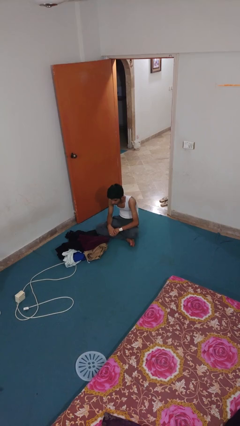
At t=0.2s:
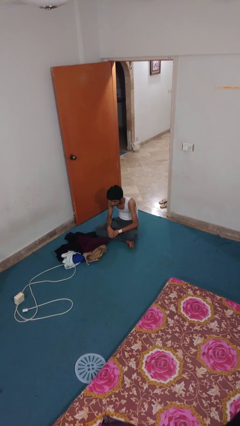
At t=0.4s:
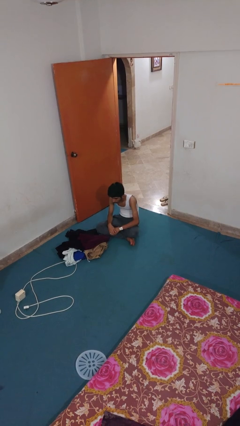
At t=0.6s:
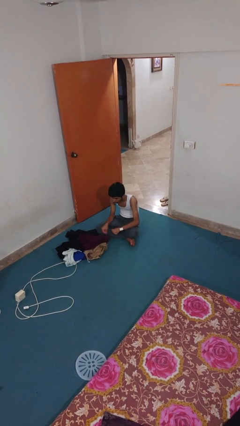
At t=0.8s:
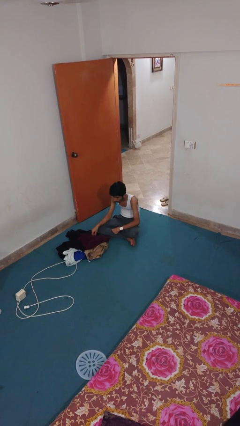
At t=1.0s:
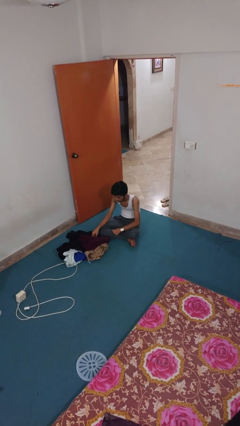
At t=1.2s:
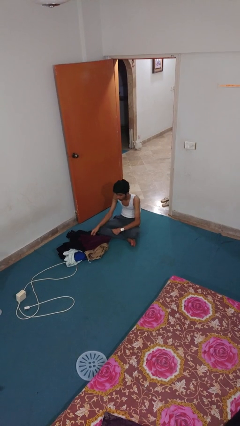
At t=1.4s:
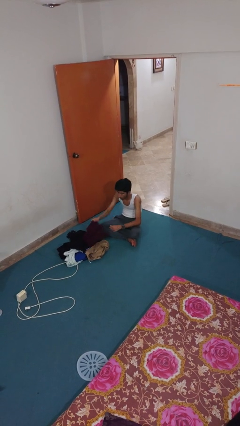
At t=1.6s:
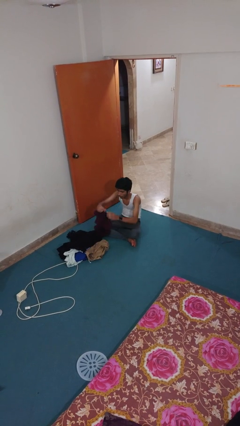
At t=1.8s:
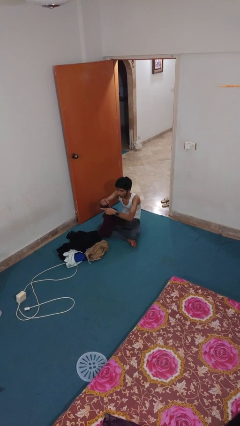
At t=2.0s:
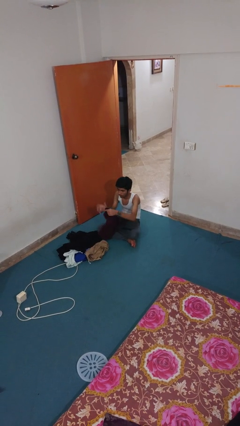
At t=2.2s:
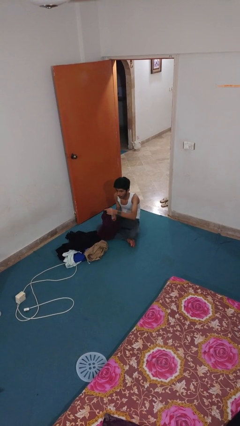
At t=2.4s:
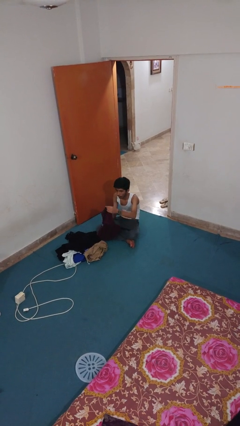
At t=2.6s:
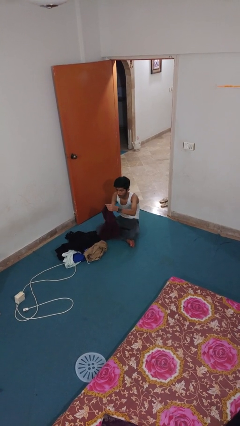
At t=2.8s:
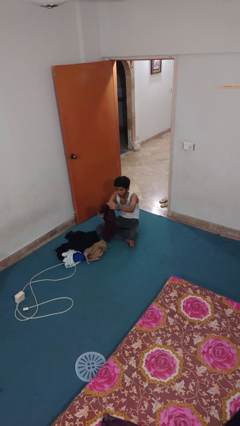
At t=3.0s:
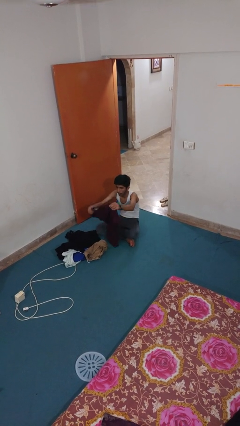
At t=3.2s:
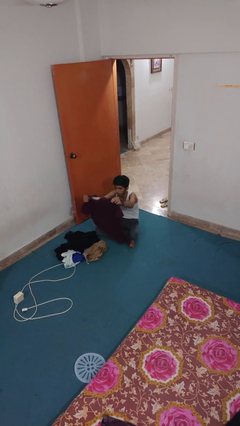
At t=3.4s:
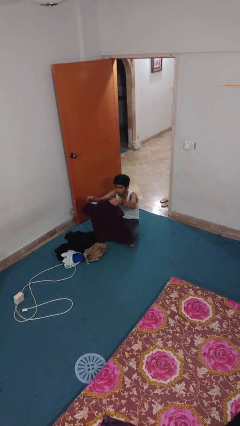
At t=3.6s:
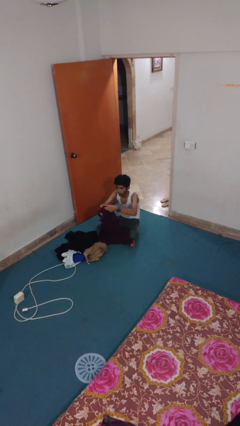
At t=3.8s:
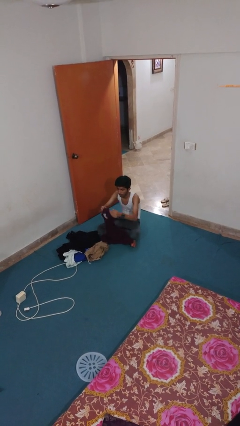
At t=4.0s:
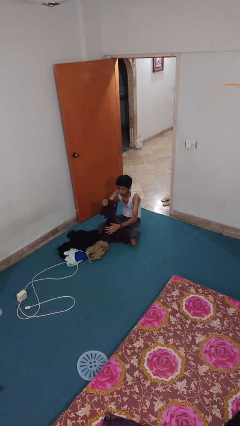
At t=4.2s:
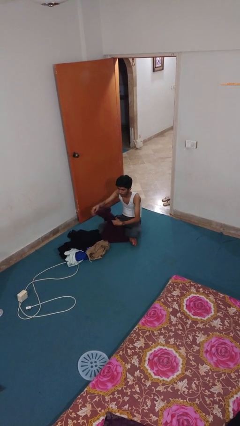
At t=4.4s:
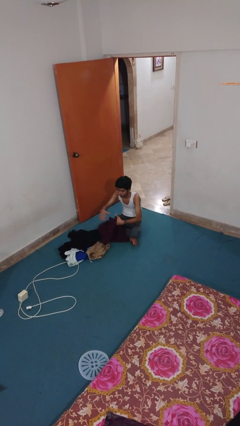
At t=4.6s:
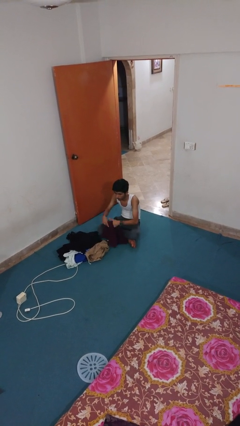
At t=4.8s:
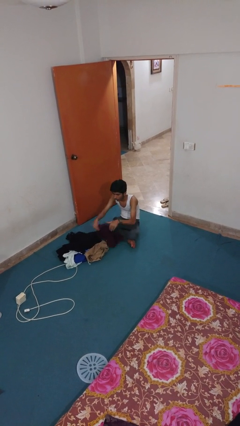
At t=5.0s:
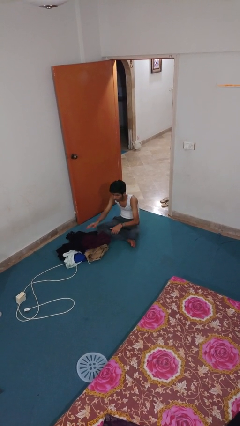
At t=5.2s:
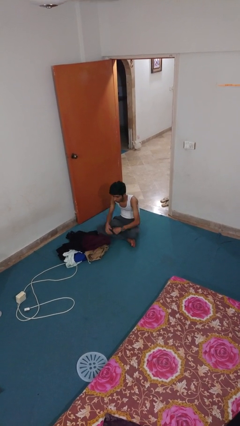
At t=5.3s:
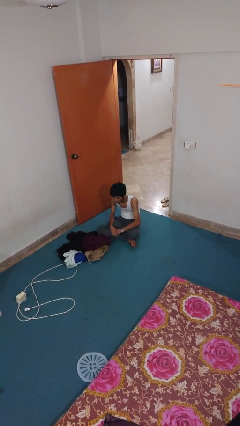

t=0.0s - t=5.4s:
person folds shirt

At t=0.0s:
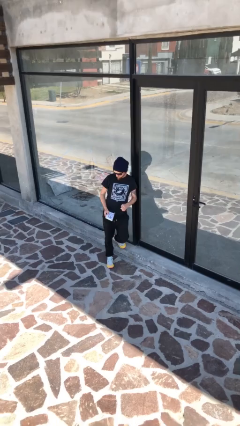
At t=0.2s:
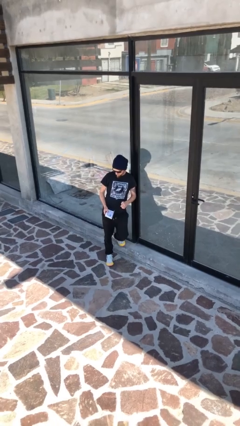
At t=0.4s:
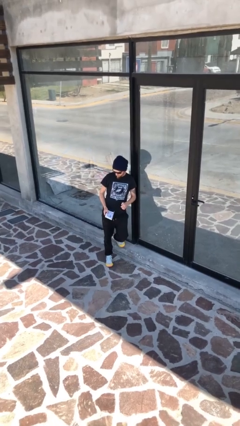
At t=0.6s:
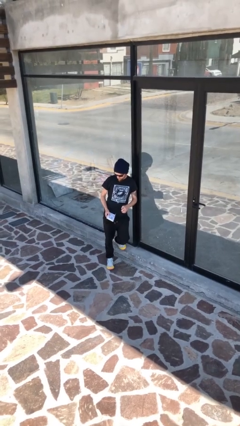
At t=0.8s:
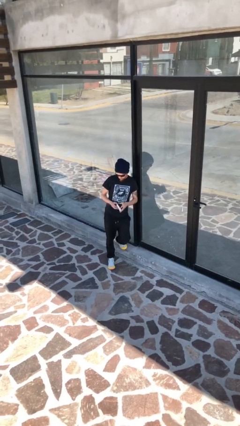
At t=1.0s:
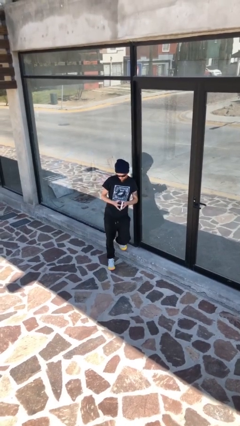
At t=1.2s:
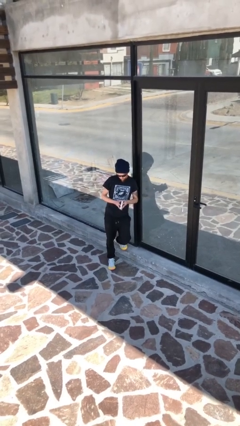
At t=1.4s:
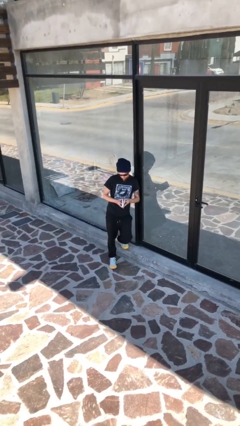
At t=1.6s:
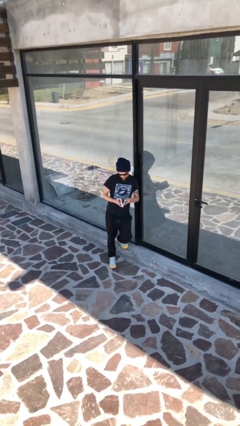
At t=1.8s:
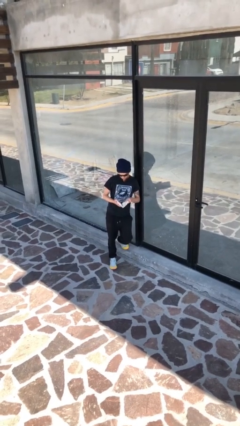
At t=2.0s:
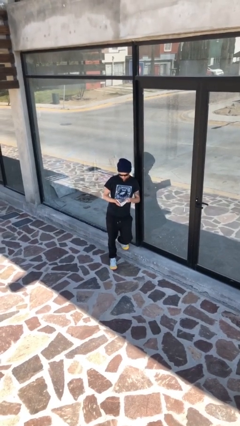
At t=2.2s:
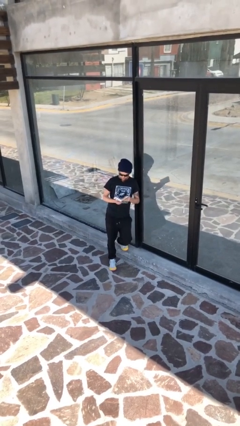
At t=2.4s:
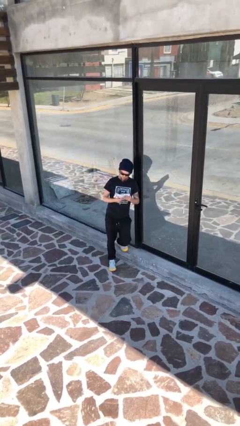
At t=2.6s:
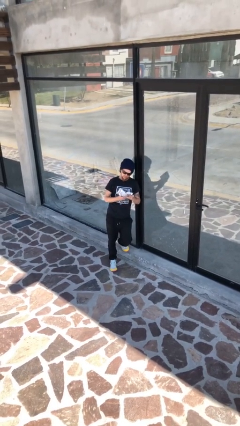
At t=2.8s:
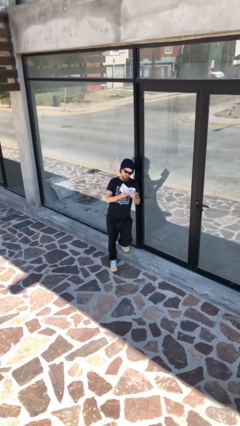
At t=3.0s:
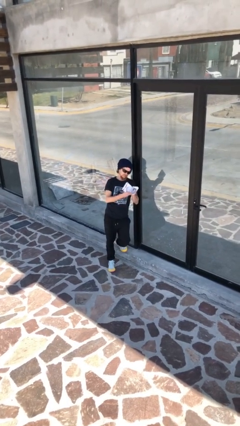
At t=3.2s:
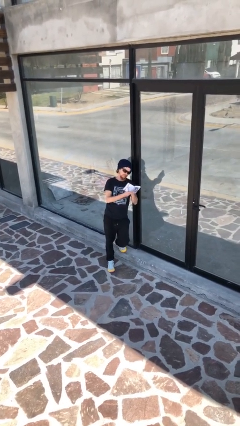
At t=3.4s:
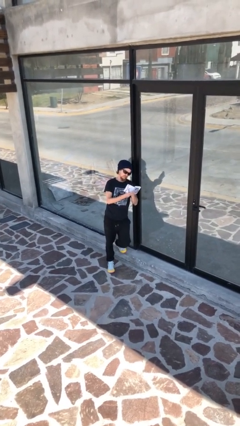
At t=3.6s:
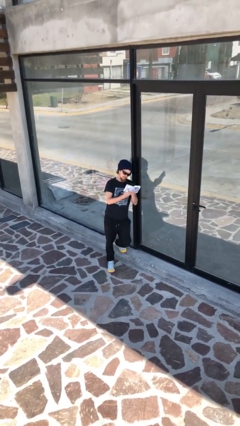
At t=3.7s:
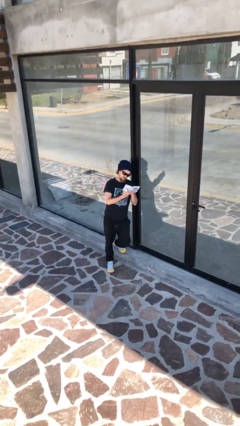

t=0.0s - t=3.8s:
person reads document

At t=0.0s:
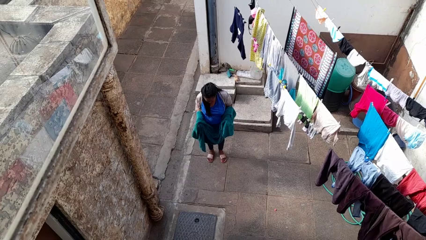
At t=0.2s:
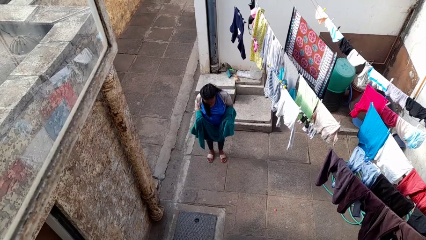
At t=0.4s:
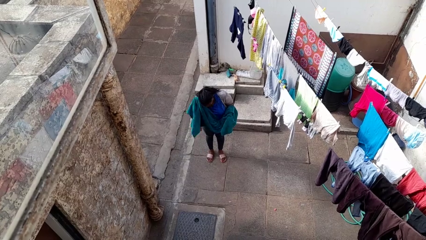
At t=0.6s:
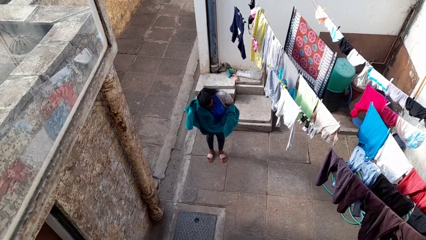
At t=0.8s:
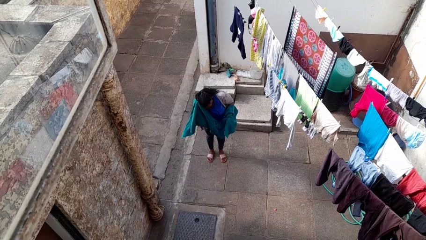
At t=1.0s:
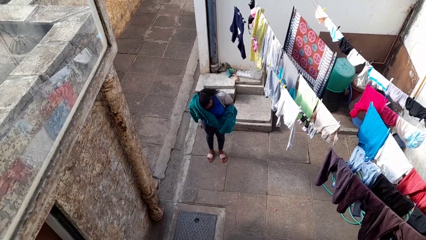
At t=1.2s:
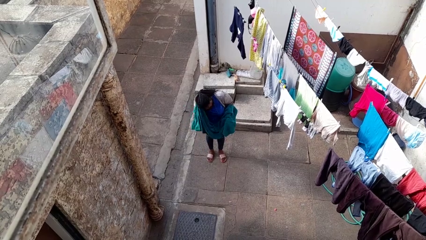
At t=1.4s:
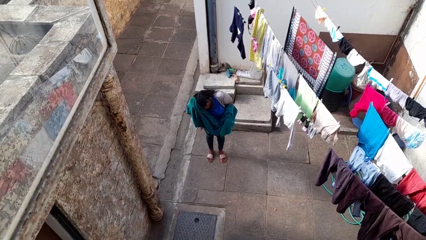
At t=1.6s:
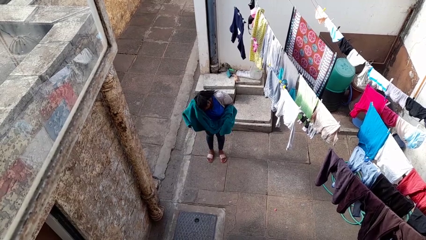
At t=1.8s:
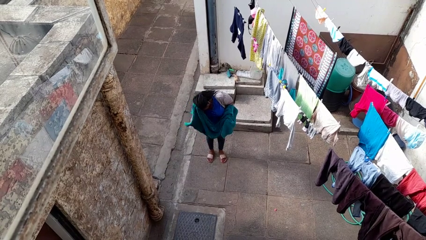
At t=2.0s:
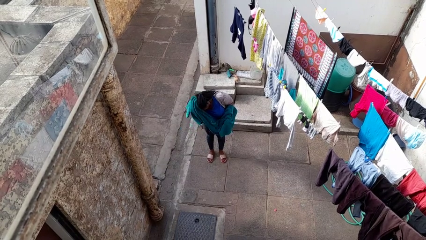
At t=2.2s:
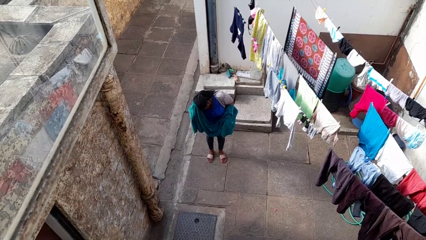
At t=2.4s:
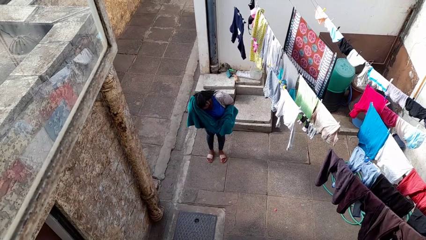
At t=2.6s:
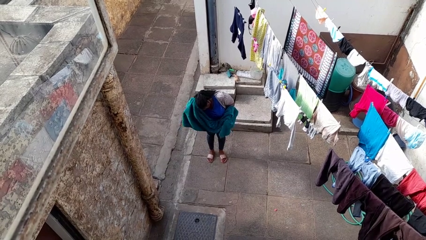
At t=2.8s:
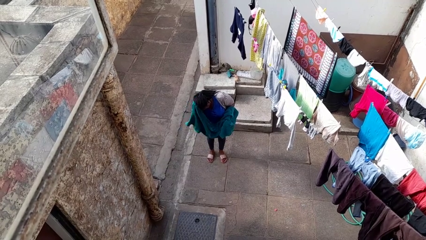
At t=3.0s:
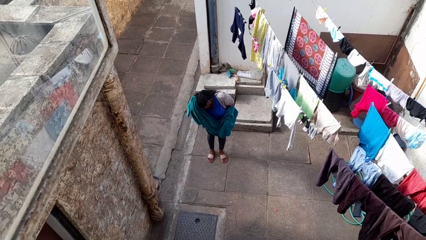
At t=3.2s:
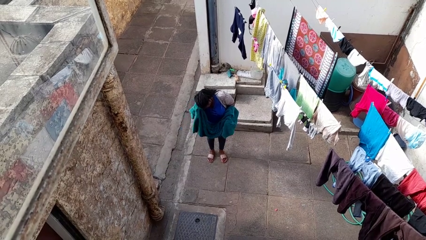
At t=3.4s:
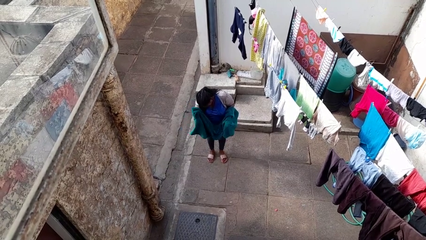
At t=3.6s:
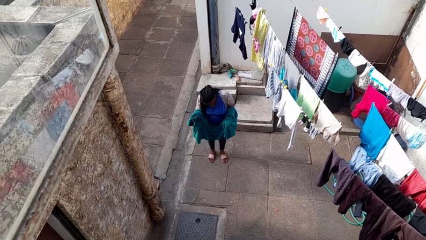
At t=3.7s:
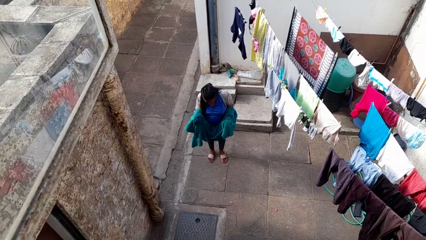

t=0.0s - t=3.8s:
person dries hair with towel

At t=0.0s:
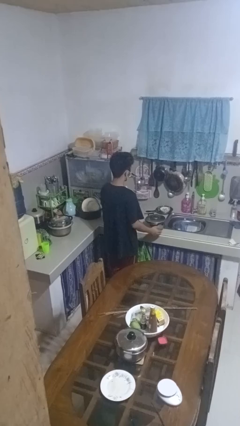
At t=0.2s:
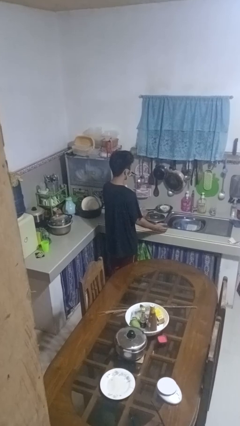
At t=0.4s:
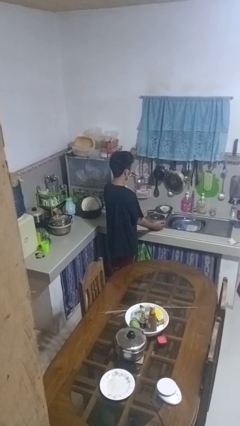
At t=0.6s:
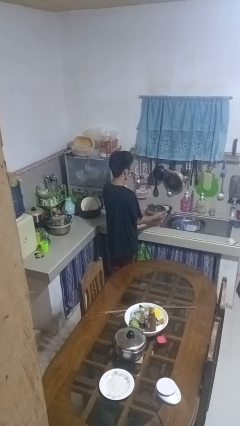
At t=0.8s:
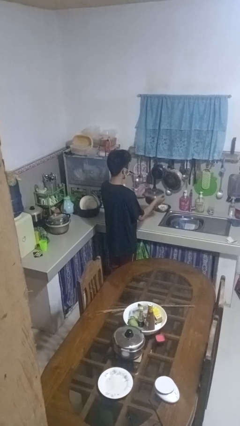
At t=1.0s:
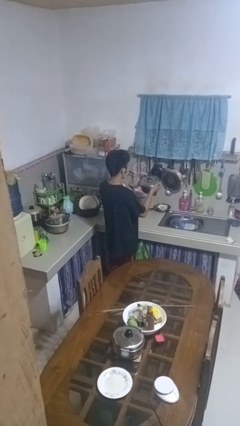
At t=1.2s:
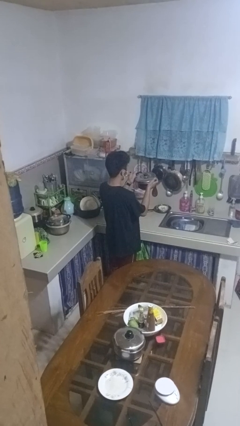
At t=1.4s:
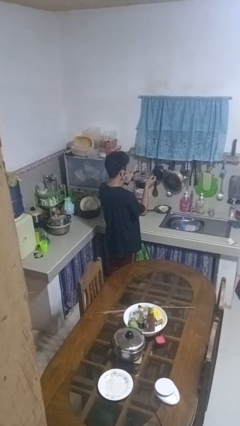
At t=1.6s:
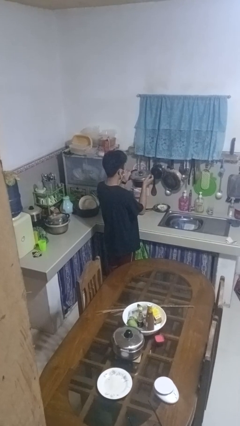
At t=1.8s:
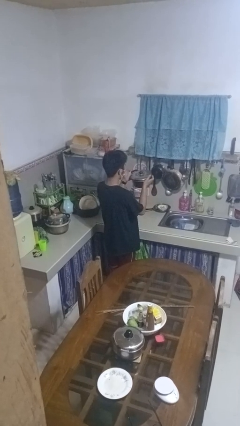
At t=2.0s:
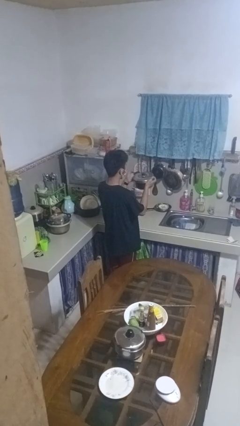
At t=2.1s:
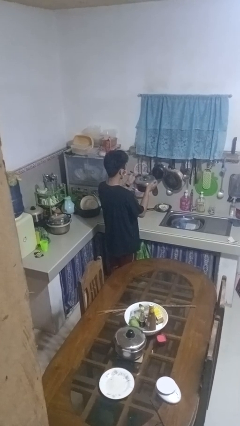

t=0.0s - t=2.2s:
person picks up object from countertop

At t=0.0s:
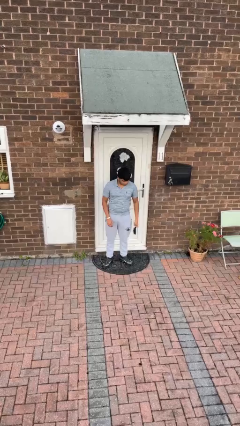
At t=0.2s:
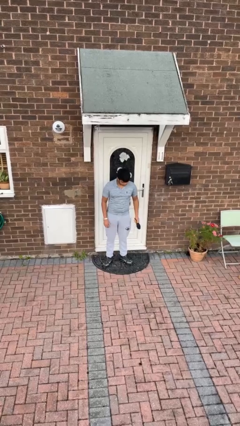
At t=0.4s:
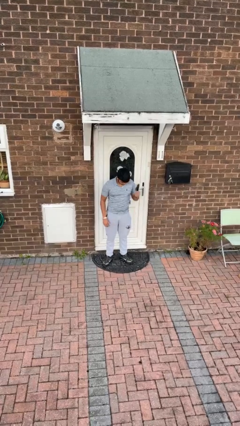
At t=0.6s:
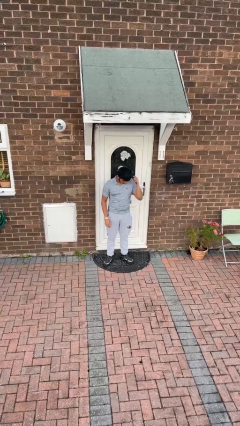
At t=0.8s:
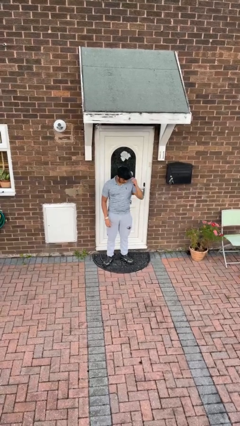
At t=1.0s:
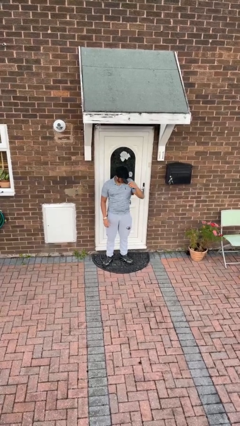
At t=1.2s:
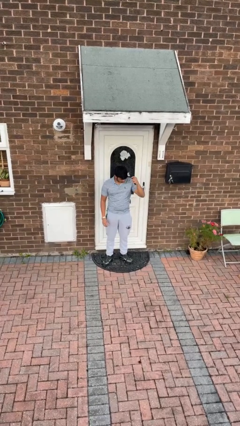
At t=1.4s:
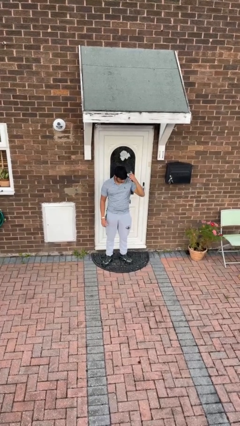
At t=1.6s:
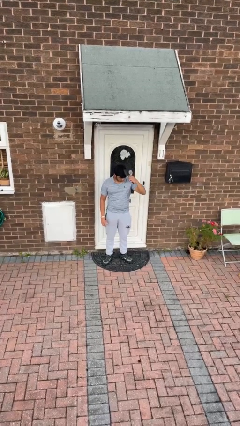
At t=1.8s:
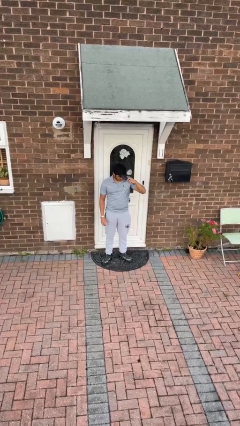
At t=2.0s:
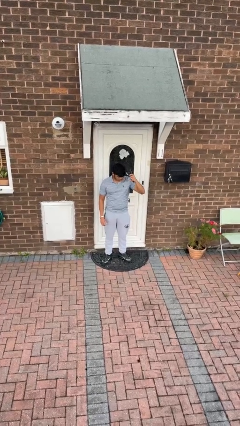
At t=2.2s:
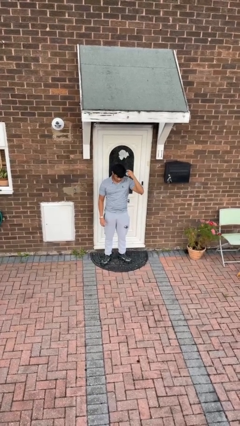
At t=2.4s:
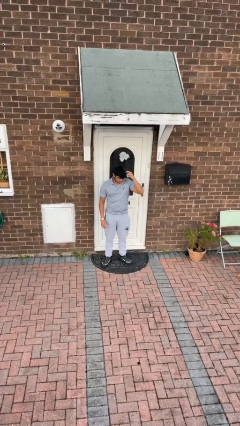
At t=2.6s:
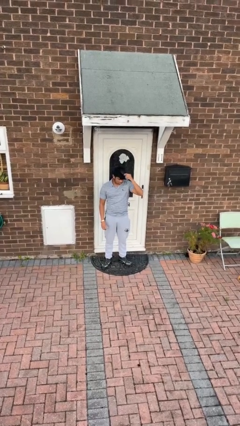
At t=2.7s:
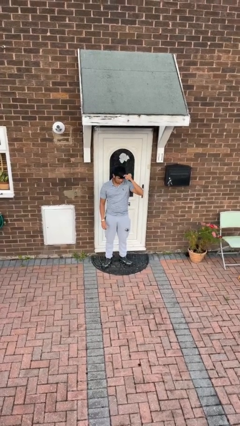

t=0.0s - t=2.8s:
person brushes hair
